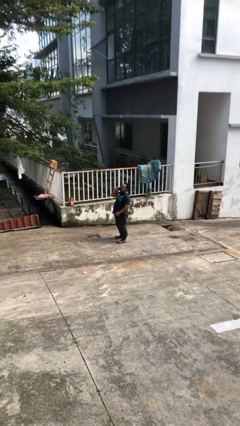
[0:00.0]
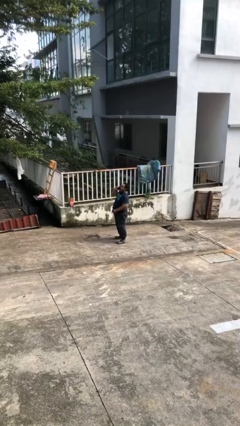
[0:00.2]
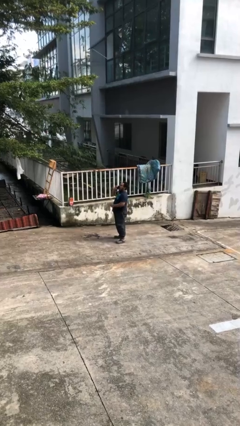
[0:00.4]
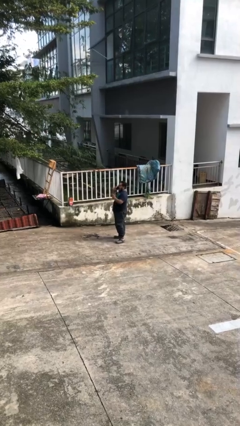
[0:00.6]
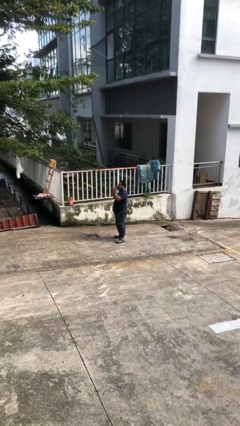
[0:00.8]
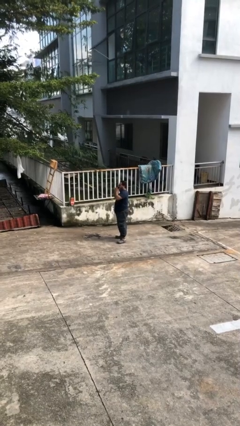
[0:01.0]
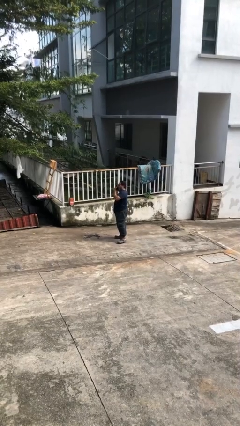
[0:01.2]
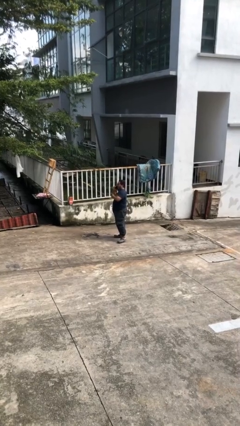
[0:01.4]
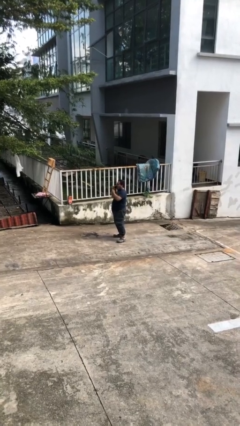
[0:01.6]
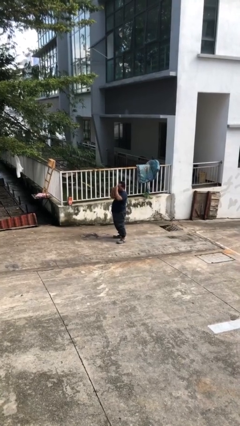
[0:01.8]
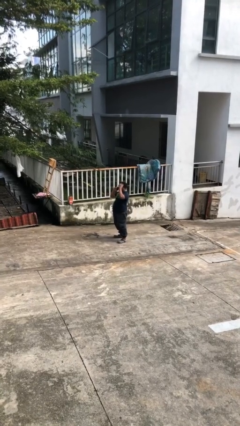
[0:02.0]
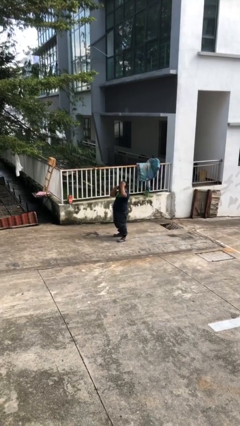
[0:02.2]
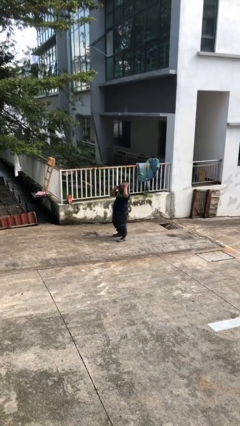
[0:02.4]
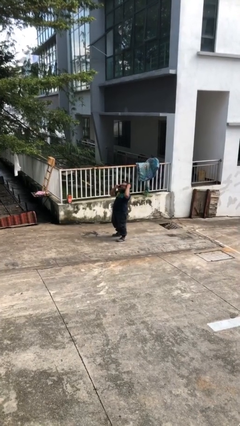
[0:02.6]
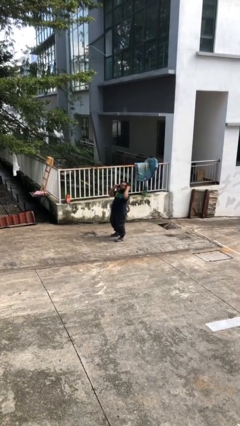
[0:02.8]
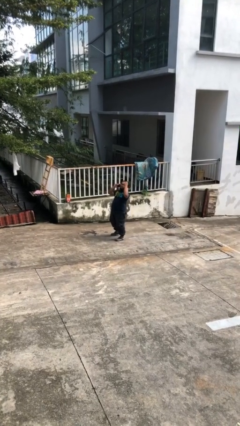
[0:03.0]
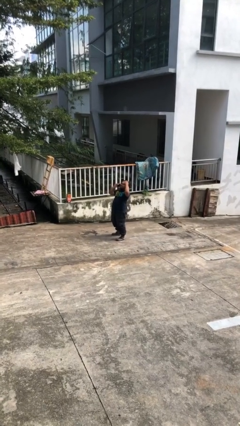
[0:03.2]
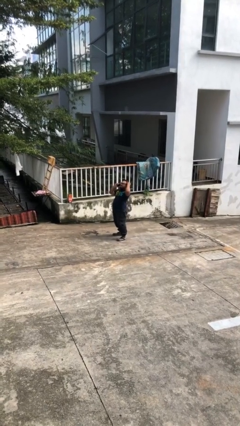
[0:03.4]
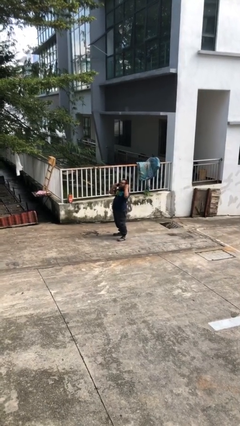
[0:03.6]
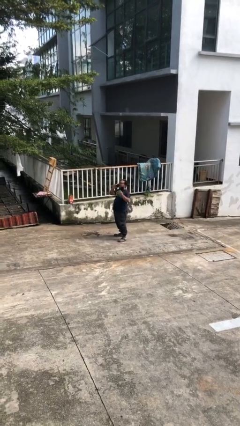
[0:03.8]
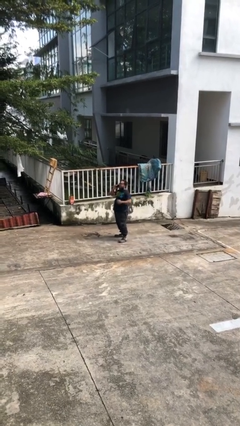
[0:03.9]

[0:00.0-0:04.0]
person talks on phone

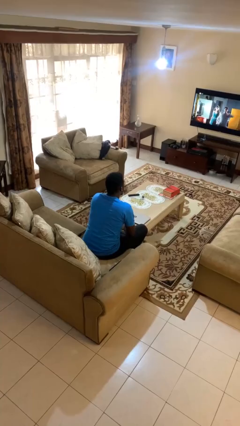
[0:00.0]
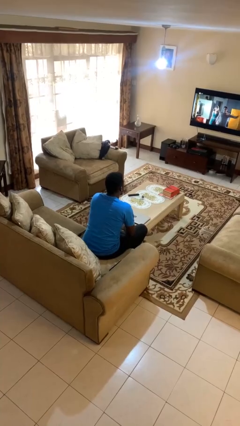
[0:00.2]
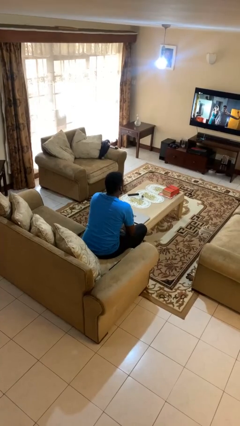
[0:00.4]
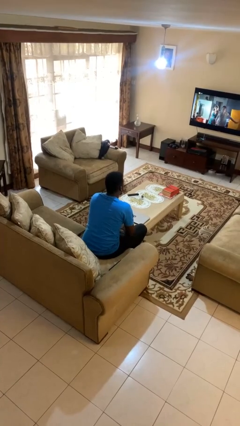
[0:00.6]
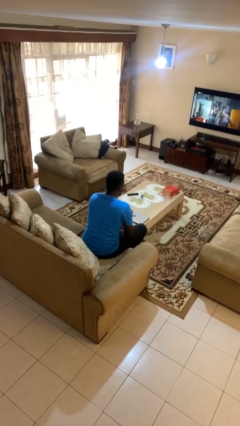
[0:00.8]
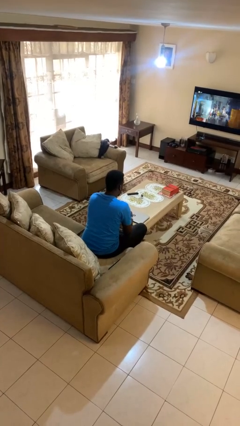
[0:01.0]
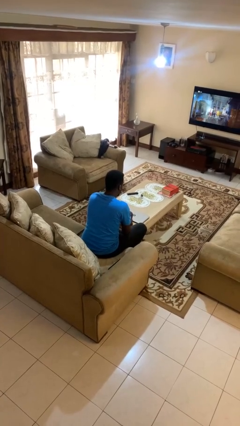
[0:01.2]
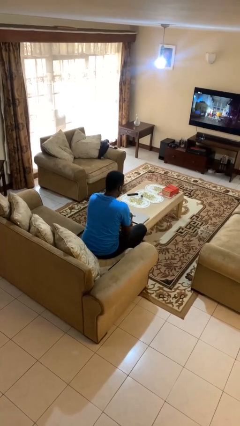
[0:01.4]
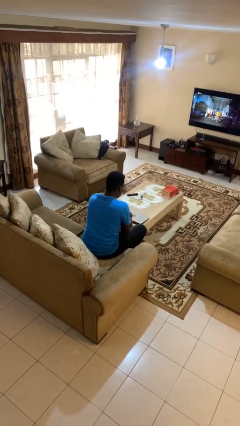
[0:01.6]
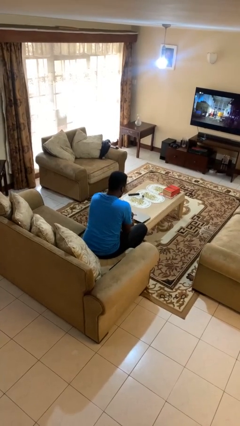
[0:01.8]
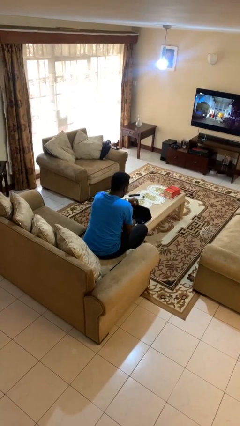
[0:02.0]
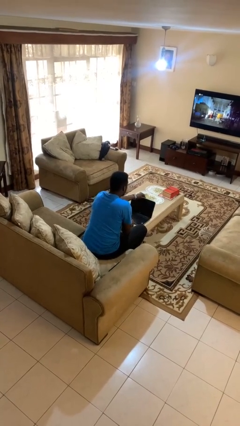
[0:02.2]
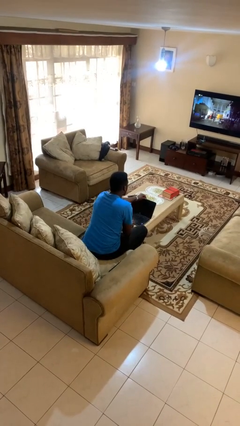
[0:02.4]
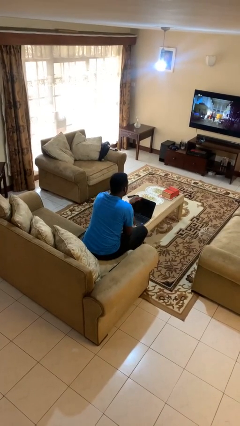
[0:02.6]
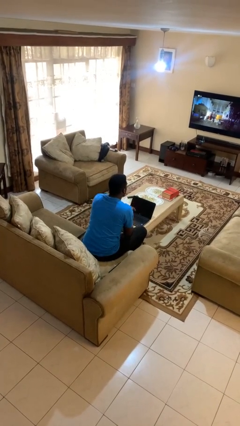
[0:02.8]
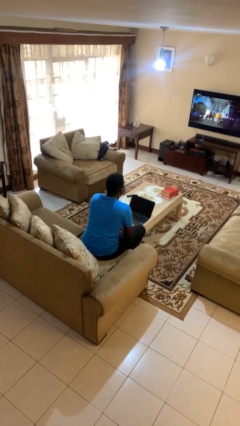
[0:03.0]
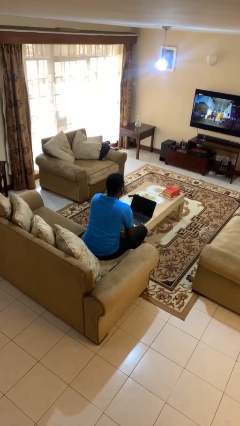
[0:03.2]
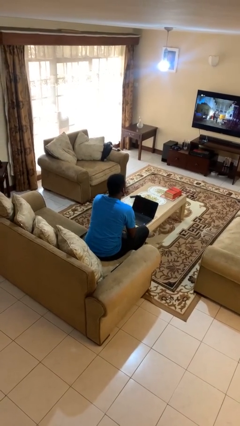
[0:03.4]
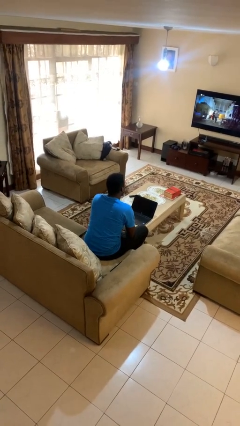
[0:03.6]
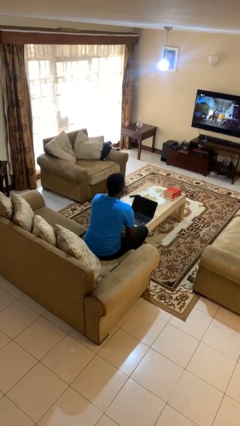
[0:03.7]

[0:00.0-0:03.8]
person opens laptop

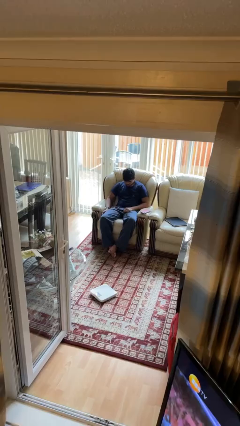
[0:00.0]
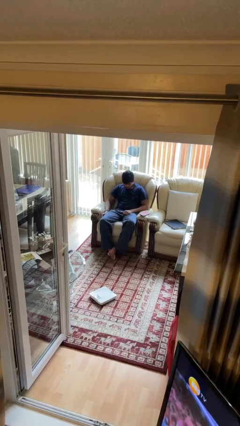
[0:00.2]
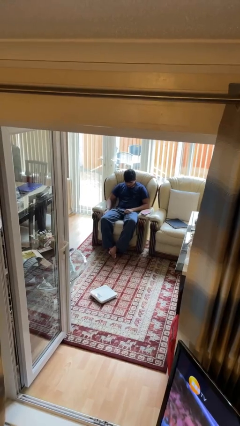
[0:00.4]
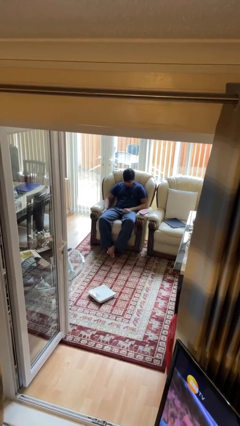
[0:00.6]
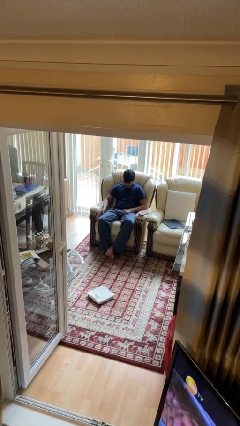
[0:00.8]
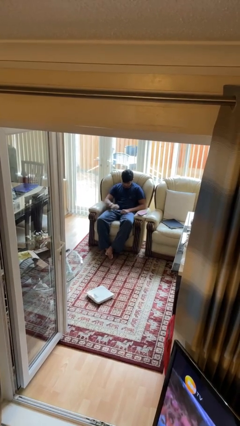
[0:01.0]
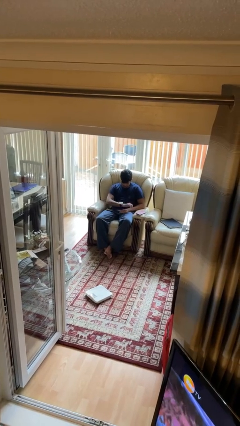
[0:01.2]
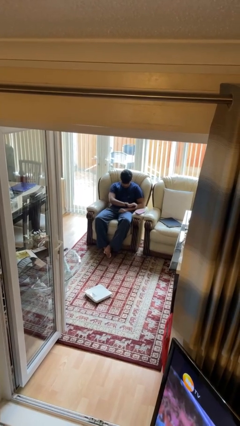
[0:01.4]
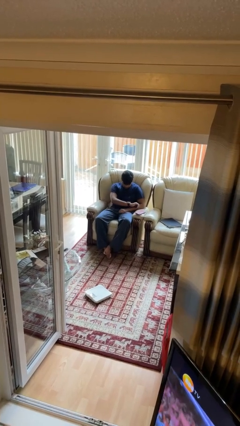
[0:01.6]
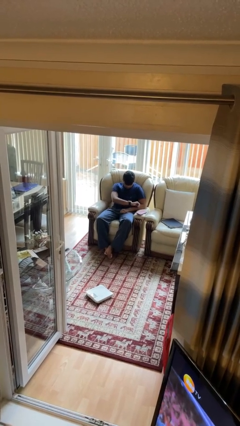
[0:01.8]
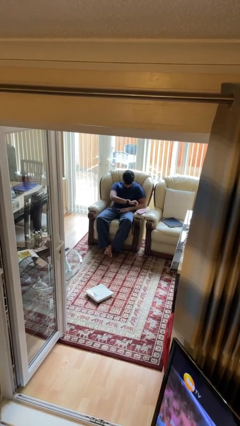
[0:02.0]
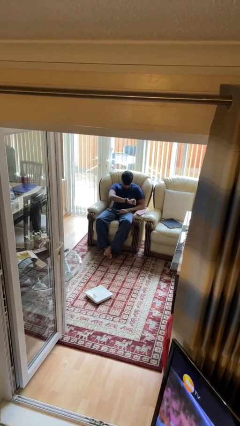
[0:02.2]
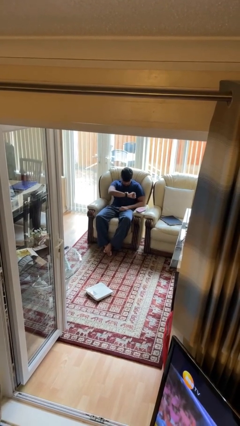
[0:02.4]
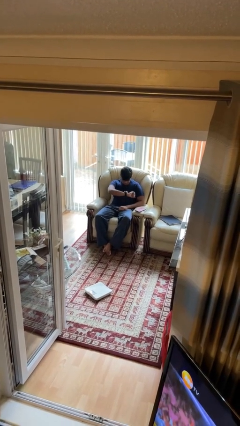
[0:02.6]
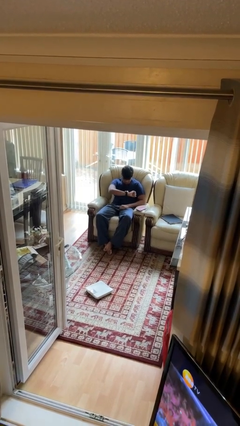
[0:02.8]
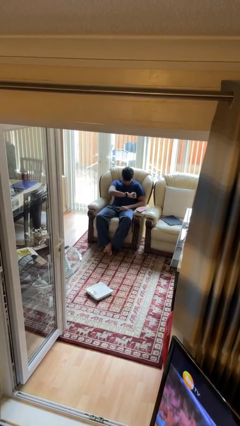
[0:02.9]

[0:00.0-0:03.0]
person looks at wristwatch

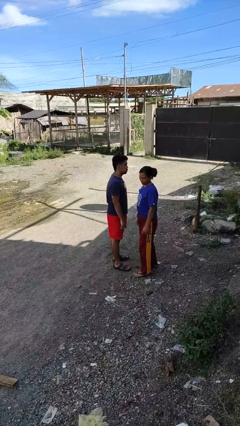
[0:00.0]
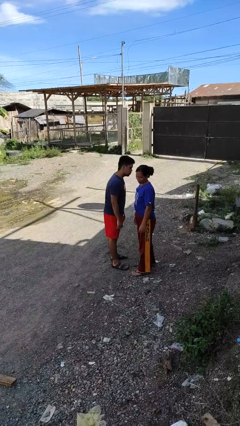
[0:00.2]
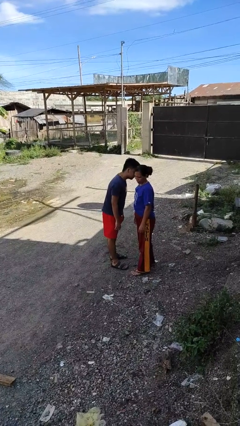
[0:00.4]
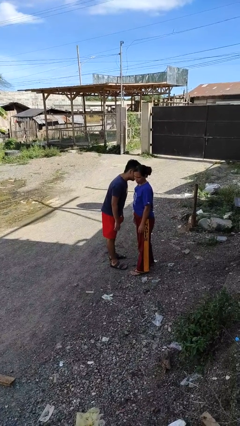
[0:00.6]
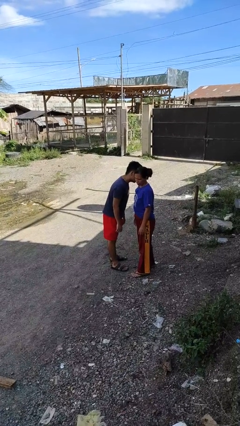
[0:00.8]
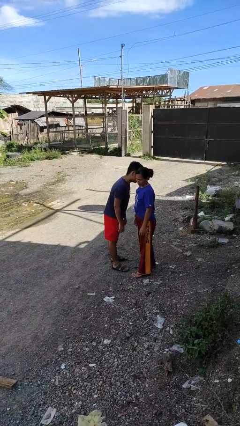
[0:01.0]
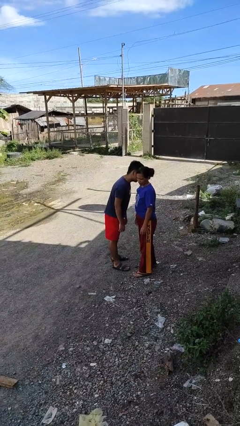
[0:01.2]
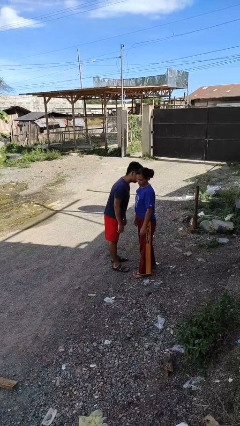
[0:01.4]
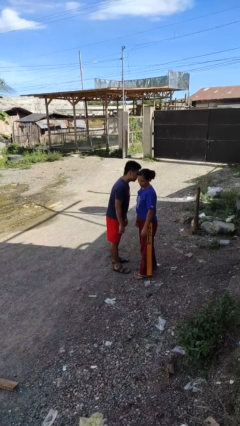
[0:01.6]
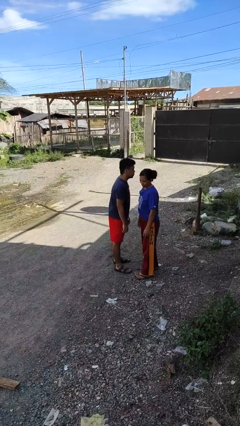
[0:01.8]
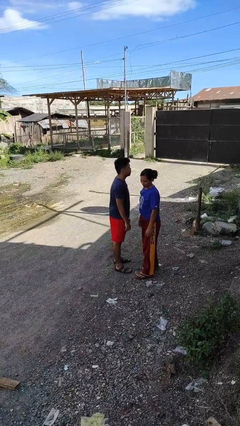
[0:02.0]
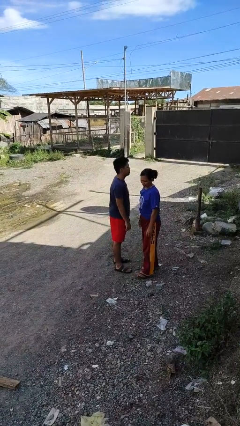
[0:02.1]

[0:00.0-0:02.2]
person kisses cheek of person

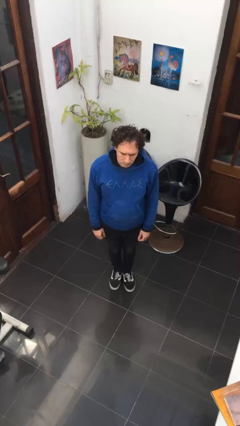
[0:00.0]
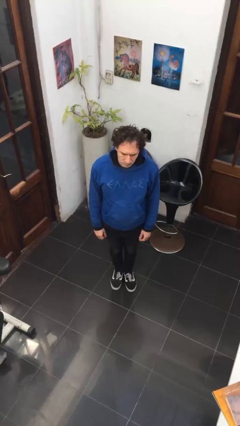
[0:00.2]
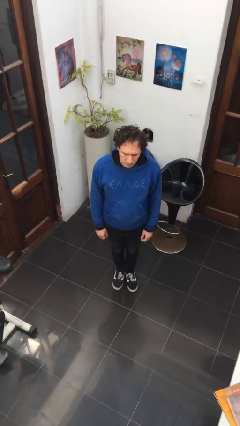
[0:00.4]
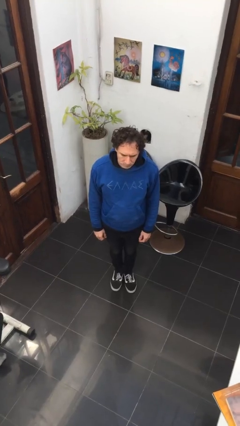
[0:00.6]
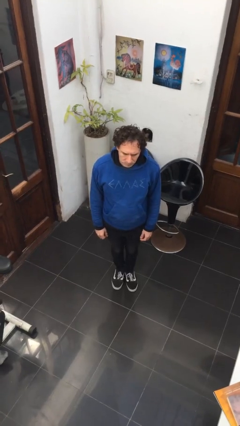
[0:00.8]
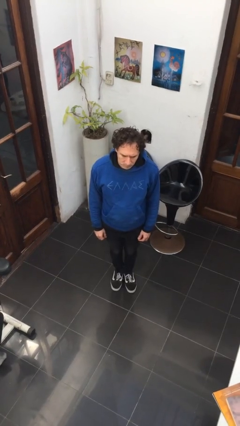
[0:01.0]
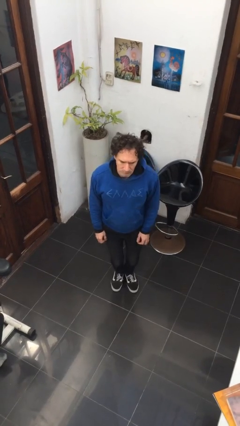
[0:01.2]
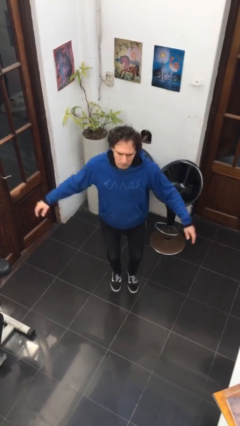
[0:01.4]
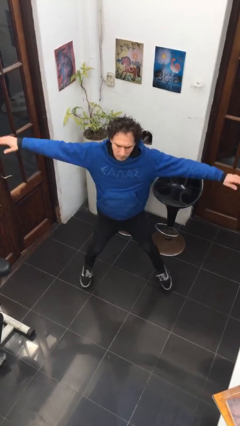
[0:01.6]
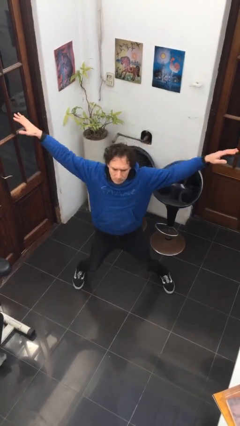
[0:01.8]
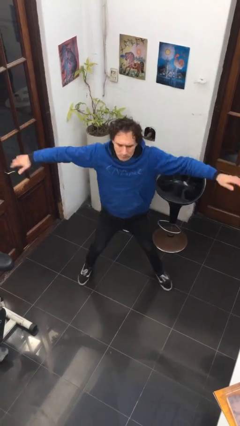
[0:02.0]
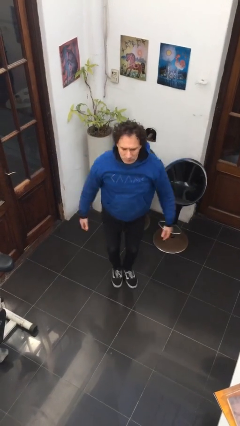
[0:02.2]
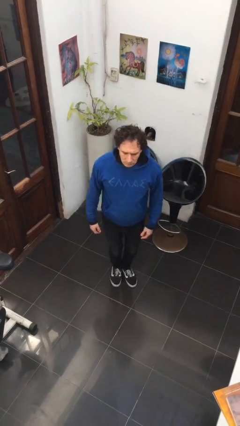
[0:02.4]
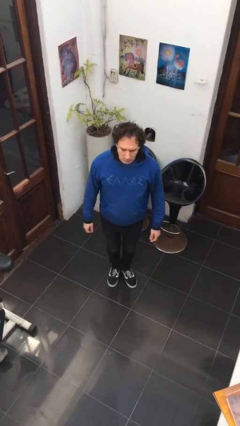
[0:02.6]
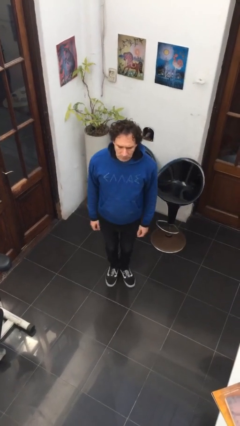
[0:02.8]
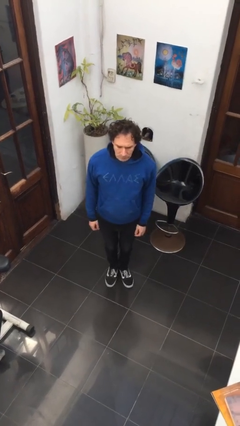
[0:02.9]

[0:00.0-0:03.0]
person exercises with jumping jacks

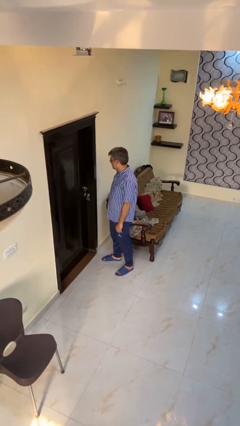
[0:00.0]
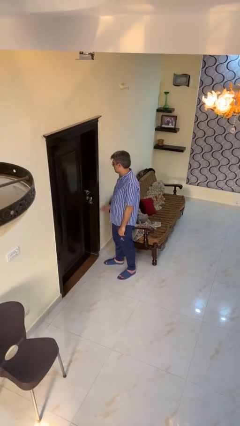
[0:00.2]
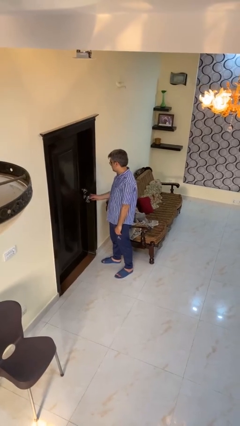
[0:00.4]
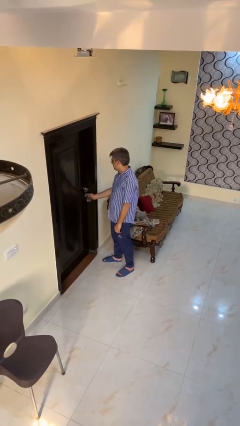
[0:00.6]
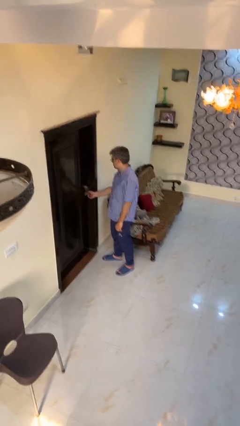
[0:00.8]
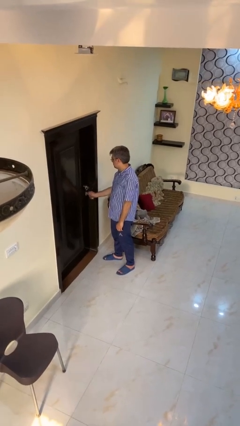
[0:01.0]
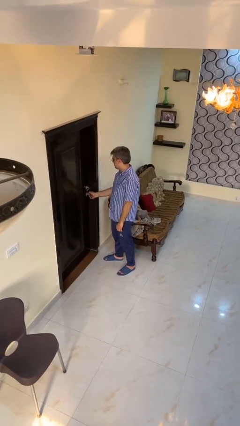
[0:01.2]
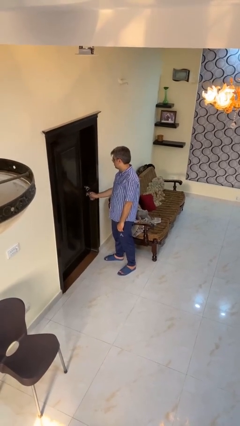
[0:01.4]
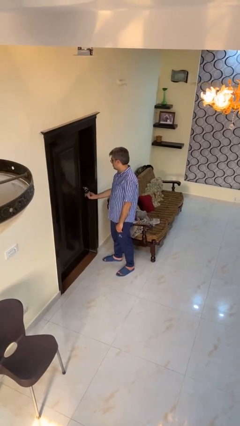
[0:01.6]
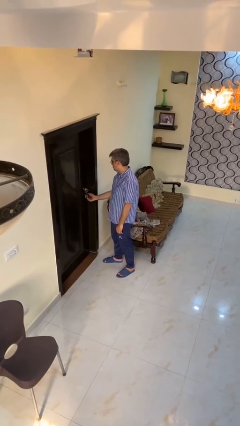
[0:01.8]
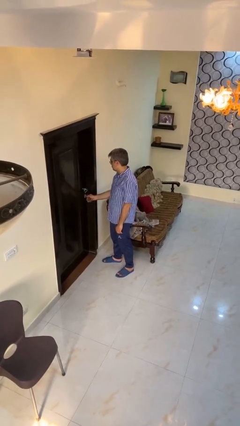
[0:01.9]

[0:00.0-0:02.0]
person unlocks door with keys
